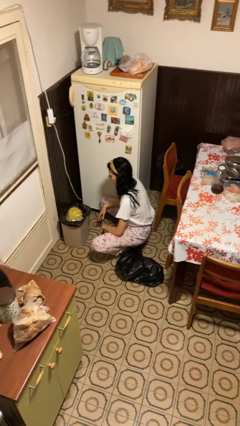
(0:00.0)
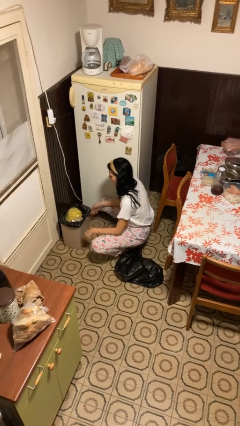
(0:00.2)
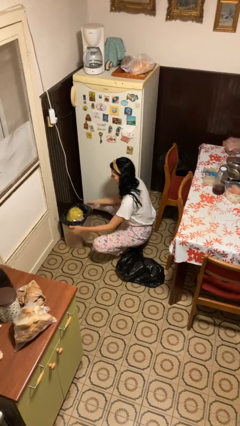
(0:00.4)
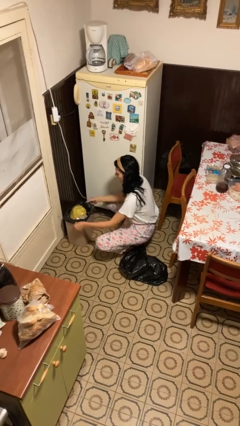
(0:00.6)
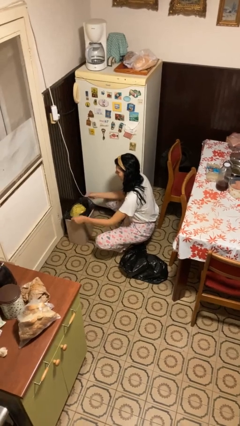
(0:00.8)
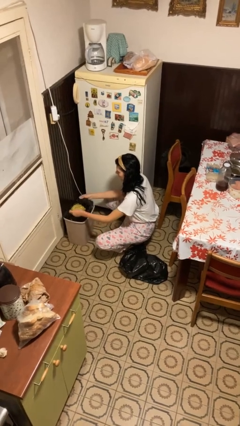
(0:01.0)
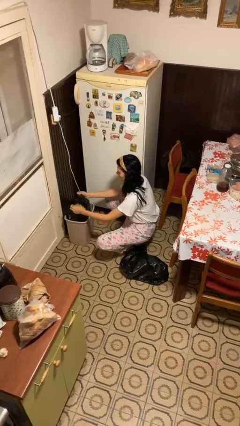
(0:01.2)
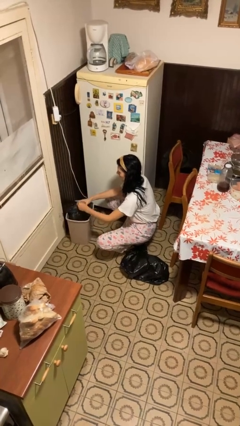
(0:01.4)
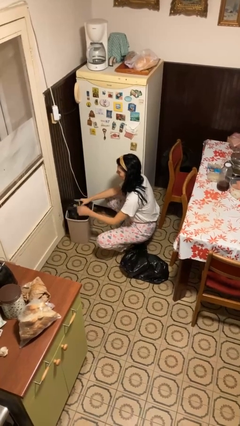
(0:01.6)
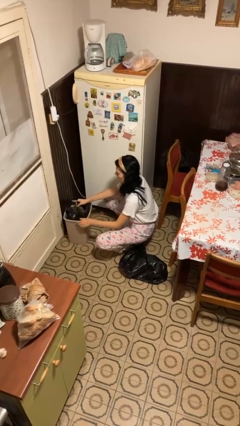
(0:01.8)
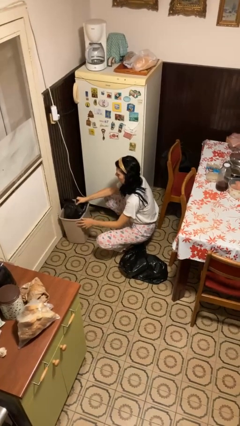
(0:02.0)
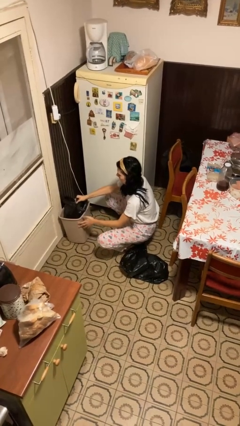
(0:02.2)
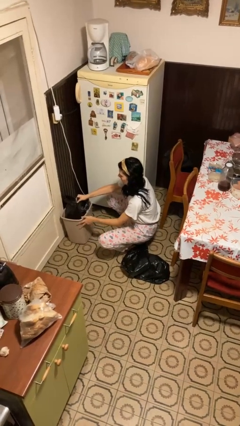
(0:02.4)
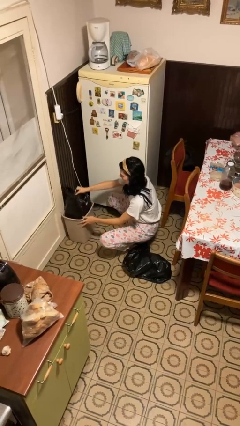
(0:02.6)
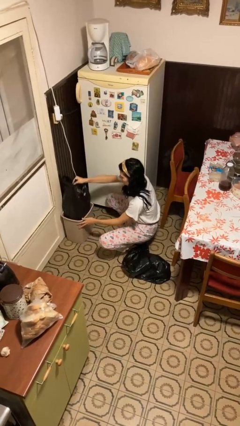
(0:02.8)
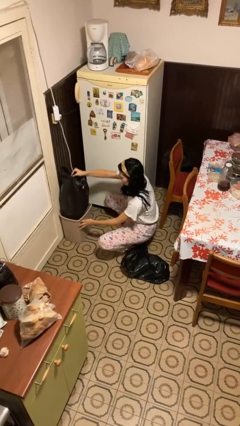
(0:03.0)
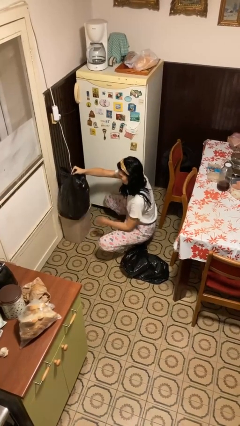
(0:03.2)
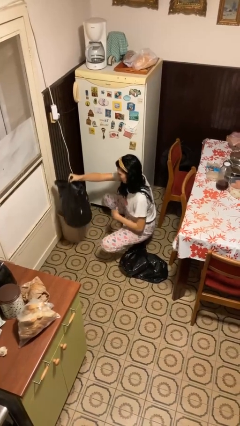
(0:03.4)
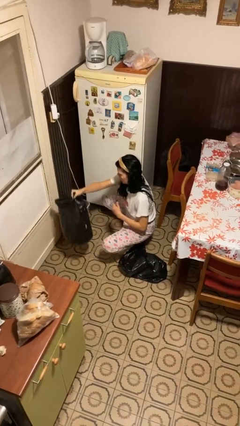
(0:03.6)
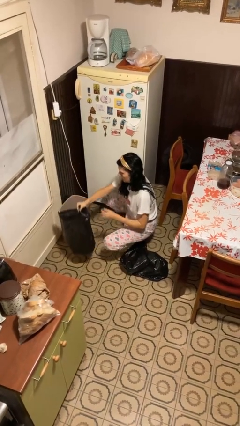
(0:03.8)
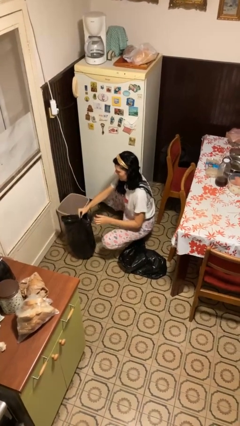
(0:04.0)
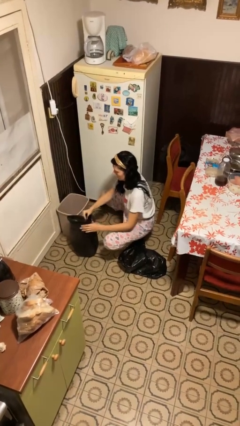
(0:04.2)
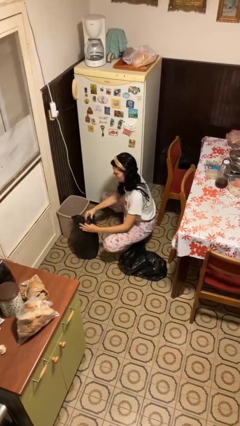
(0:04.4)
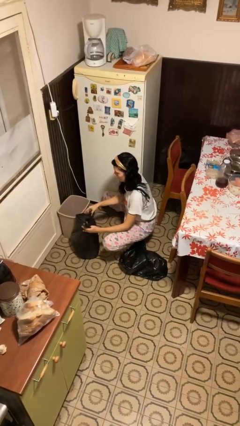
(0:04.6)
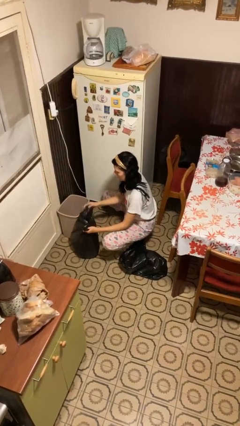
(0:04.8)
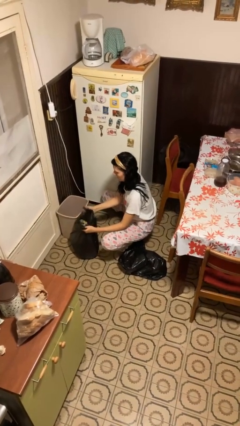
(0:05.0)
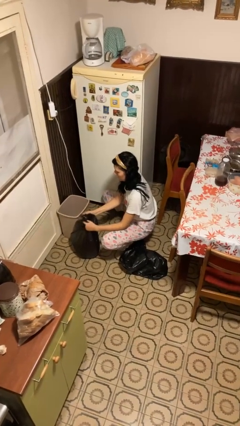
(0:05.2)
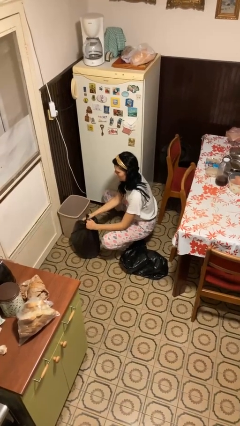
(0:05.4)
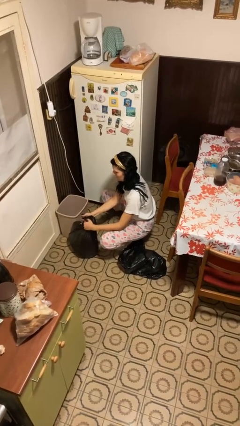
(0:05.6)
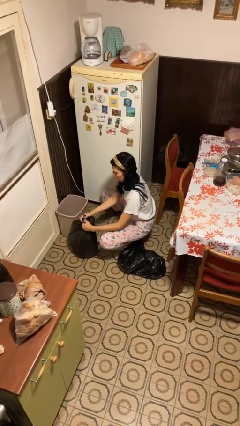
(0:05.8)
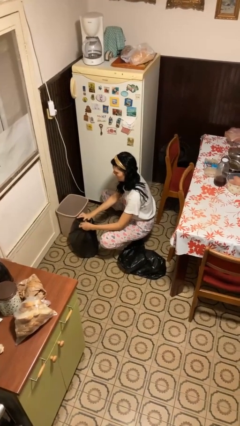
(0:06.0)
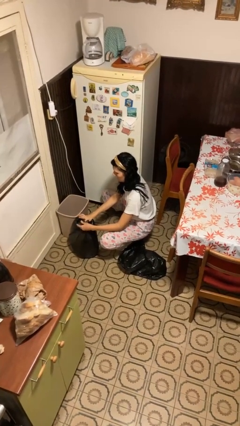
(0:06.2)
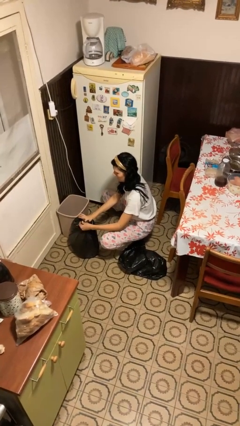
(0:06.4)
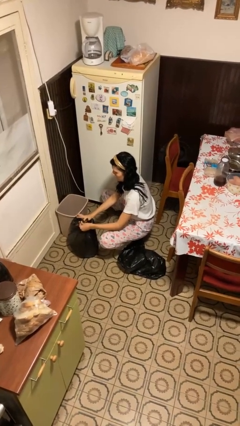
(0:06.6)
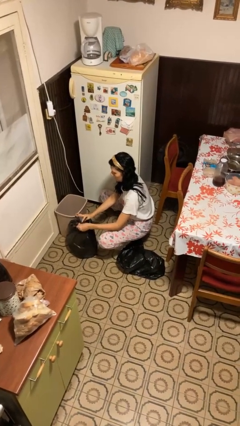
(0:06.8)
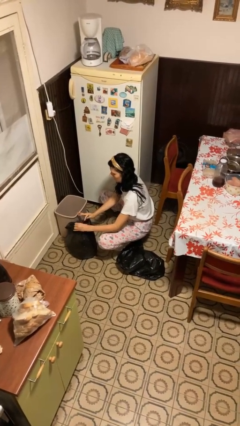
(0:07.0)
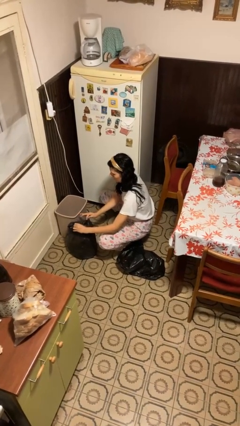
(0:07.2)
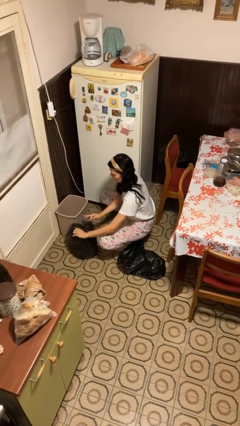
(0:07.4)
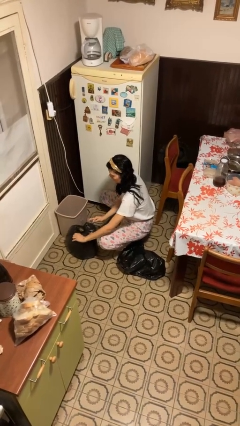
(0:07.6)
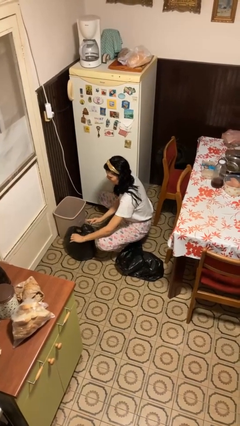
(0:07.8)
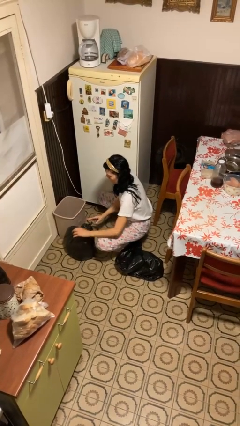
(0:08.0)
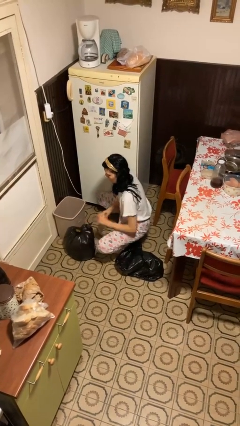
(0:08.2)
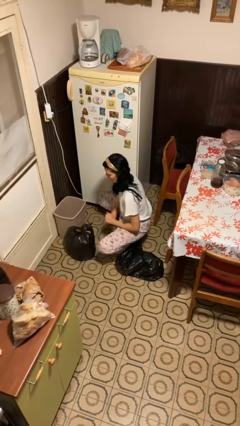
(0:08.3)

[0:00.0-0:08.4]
person removes trashbag from trashcan

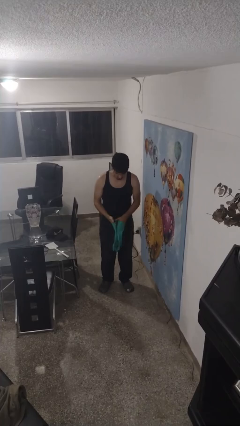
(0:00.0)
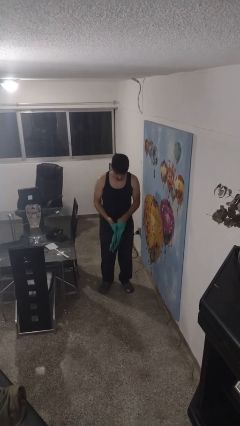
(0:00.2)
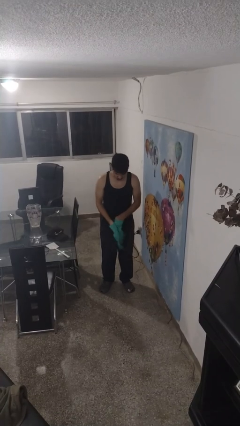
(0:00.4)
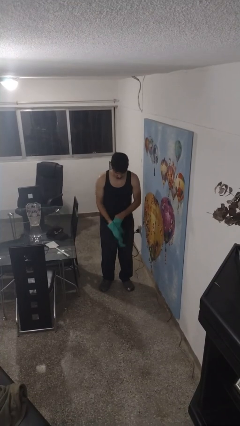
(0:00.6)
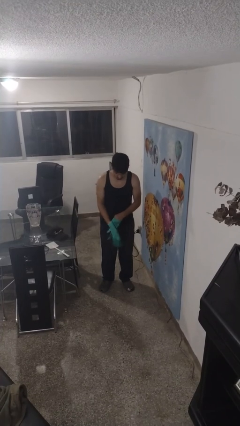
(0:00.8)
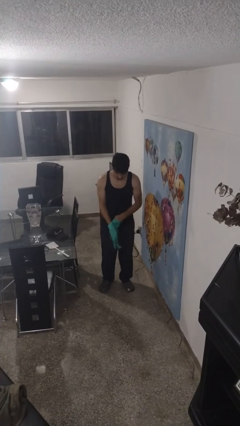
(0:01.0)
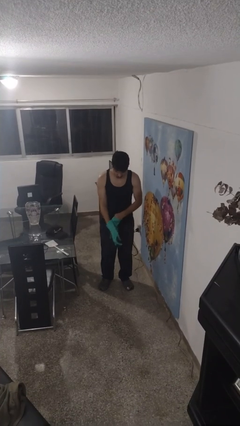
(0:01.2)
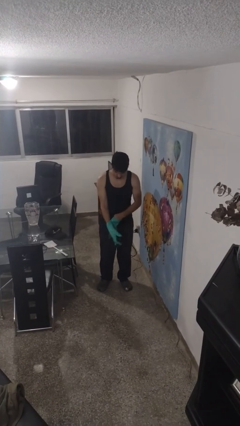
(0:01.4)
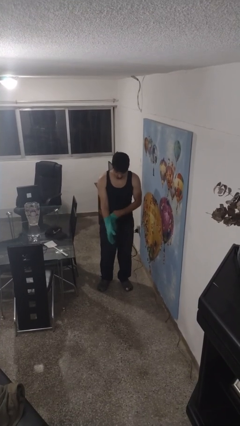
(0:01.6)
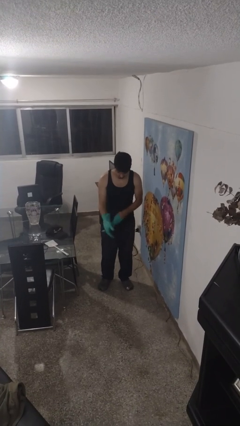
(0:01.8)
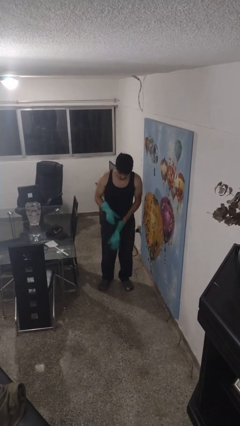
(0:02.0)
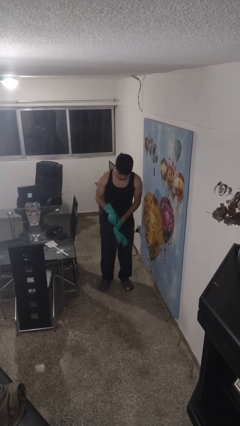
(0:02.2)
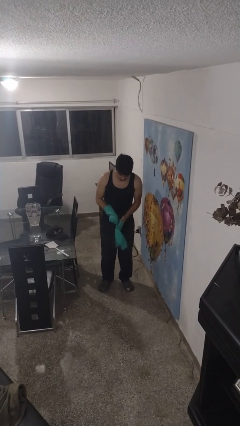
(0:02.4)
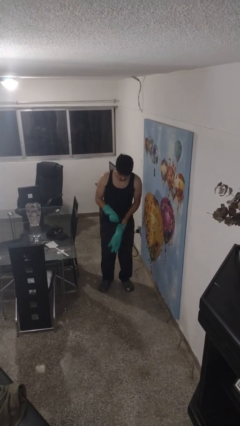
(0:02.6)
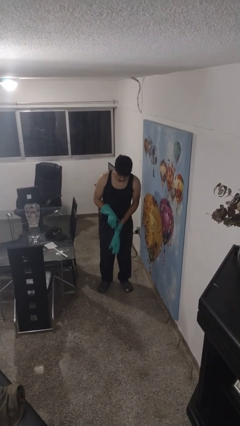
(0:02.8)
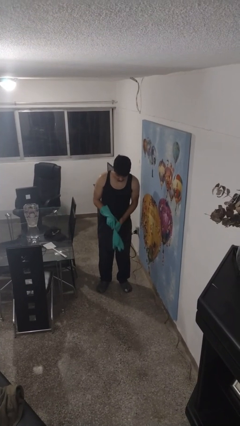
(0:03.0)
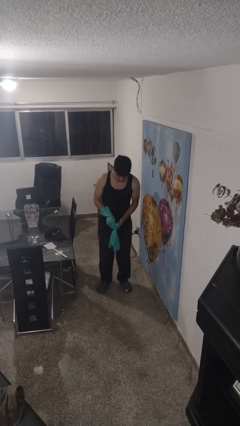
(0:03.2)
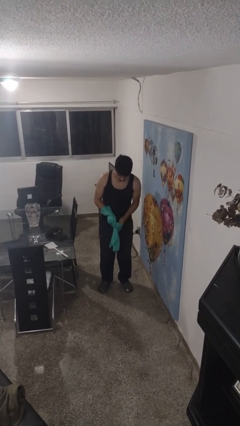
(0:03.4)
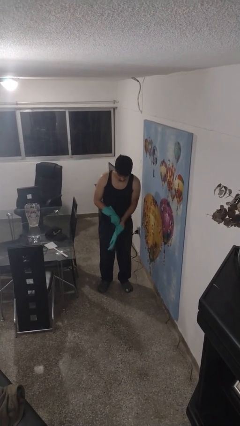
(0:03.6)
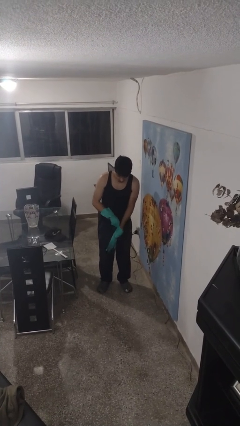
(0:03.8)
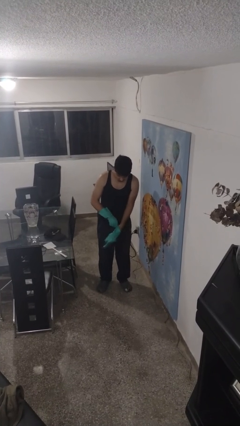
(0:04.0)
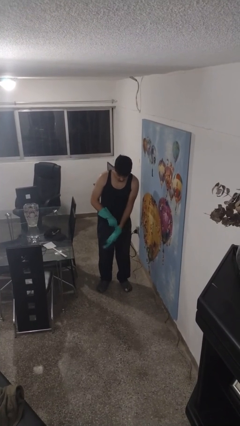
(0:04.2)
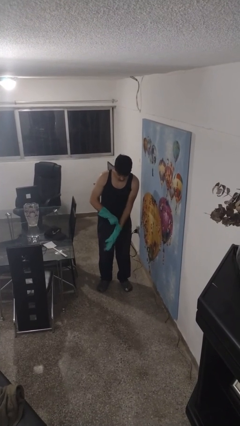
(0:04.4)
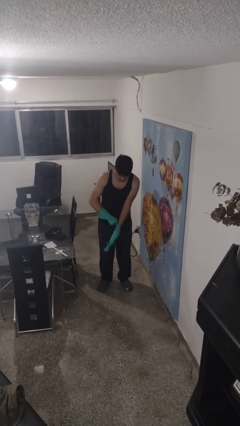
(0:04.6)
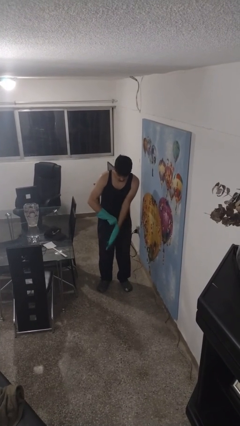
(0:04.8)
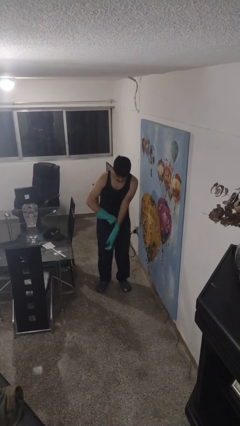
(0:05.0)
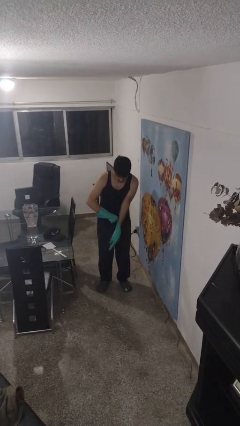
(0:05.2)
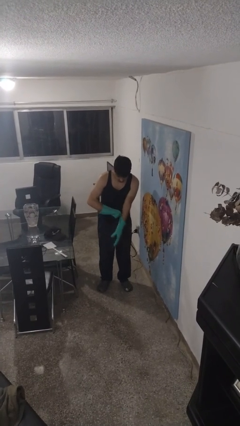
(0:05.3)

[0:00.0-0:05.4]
person puts on gloves

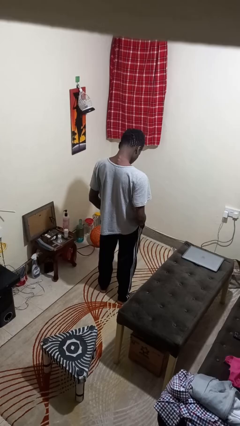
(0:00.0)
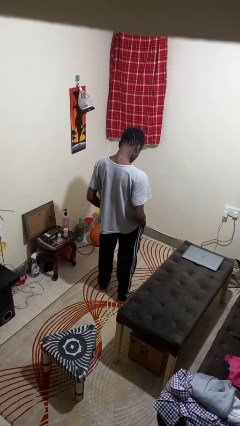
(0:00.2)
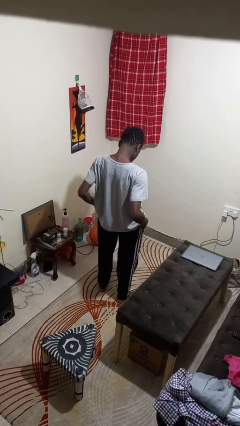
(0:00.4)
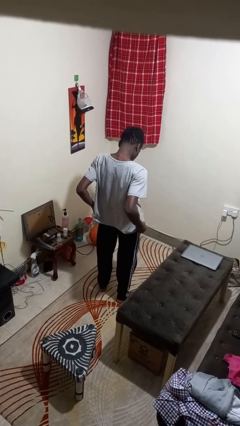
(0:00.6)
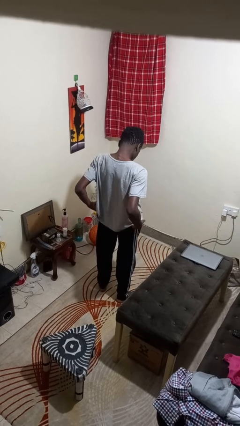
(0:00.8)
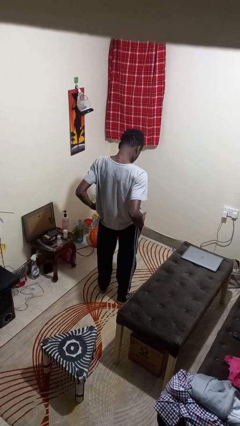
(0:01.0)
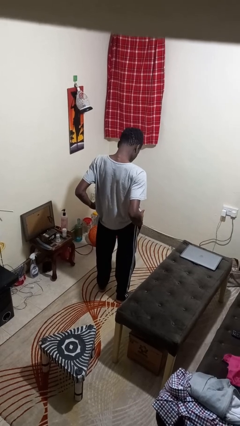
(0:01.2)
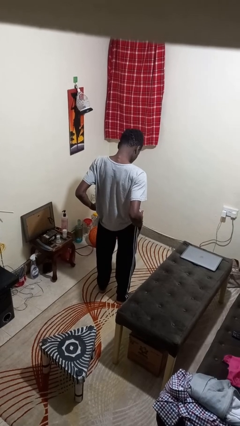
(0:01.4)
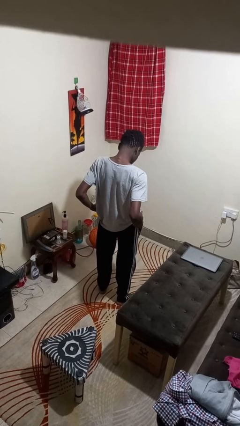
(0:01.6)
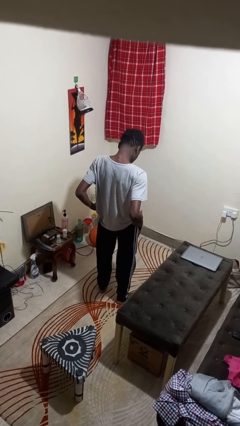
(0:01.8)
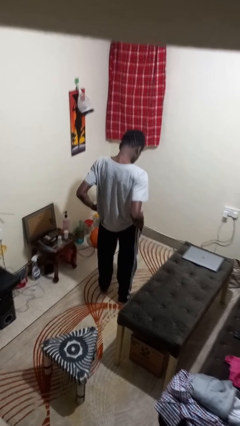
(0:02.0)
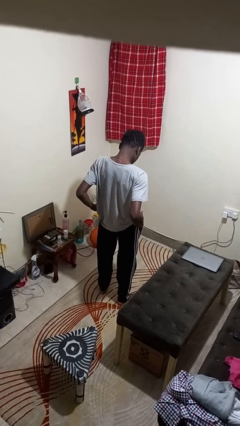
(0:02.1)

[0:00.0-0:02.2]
person puts hands in back pockets

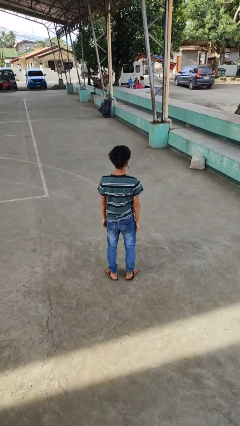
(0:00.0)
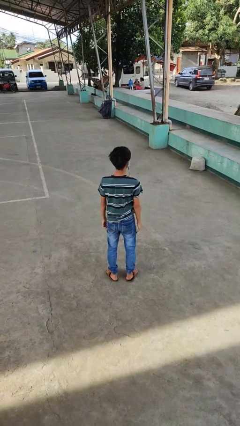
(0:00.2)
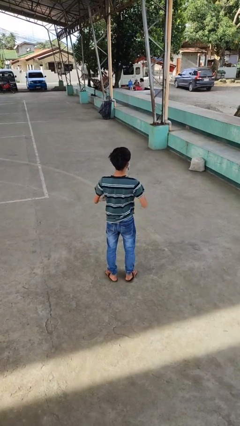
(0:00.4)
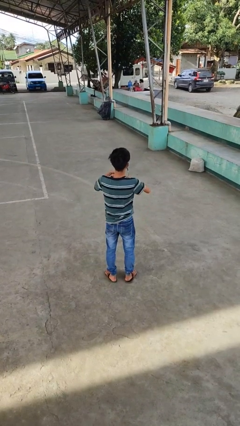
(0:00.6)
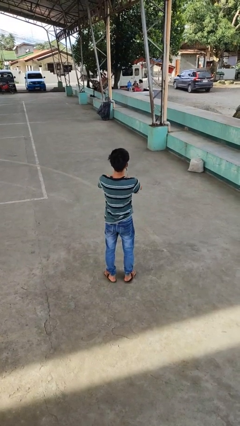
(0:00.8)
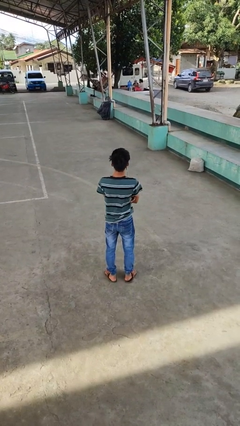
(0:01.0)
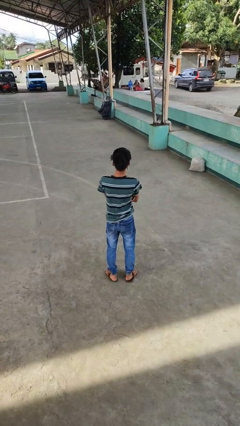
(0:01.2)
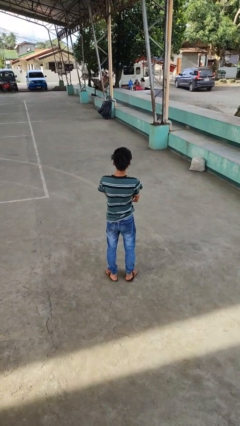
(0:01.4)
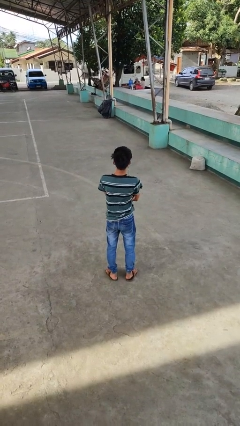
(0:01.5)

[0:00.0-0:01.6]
person crosses arms
